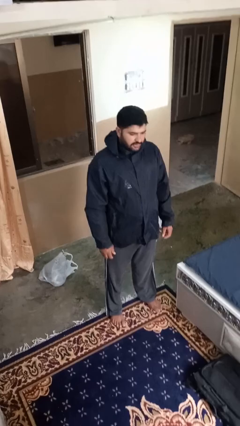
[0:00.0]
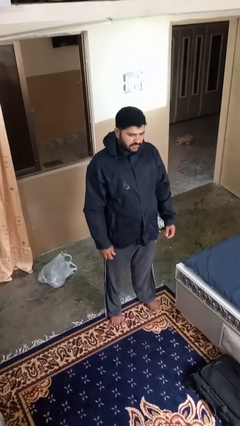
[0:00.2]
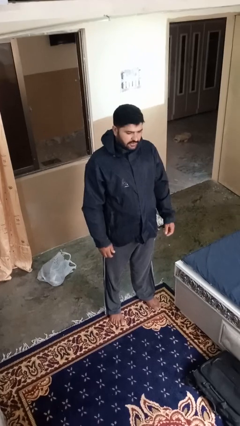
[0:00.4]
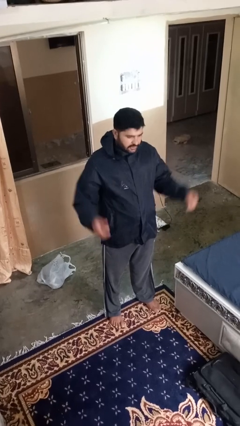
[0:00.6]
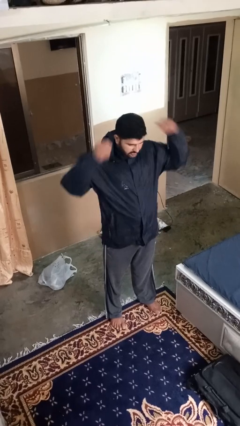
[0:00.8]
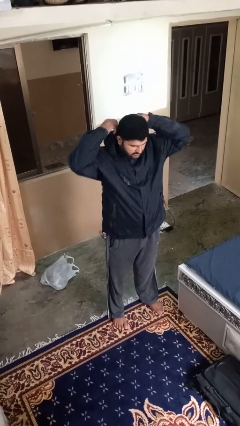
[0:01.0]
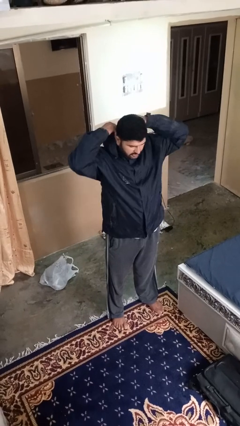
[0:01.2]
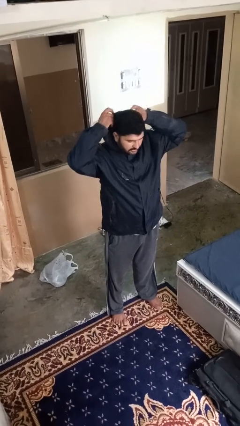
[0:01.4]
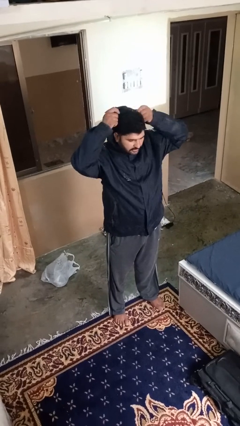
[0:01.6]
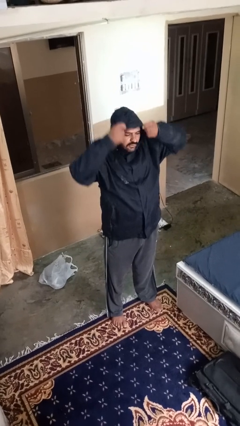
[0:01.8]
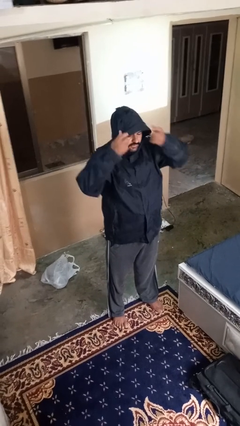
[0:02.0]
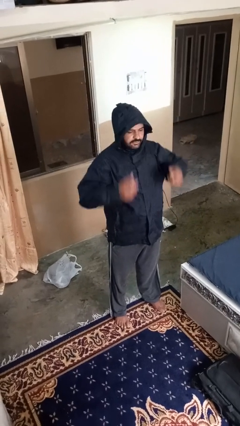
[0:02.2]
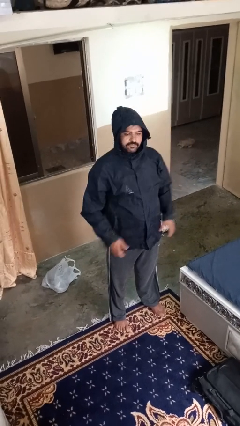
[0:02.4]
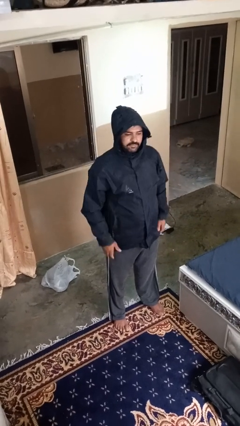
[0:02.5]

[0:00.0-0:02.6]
person puts on hoodie

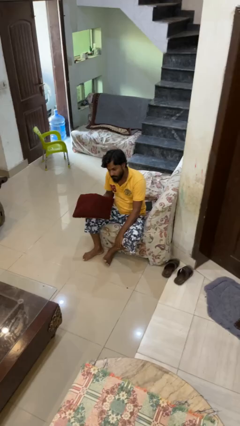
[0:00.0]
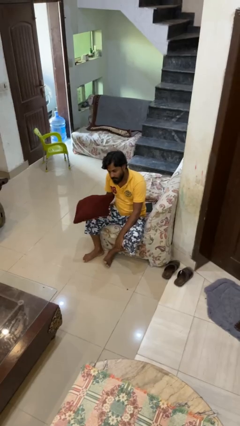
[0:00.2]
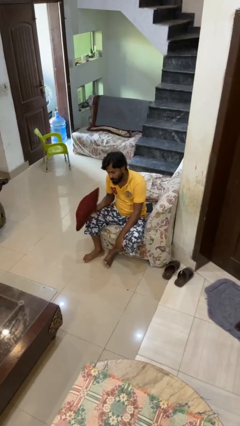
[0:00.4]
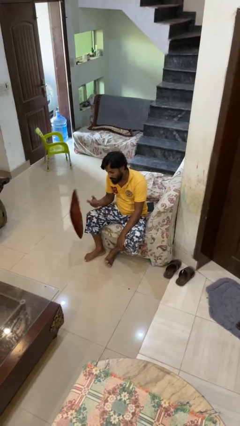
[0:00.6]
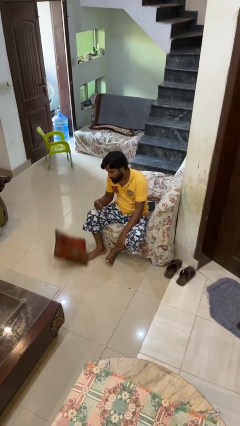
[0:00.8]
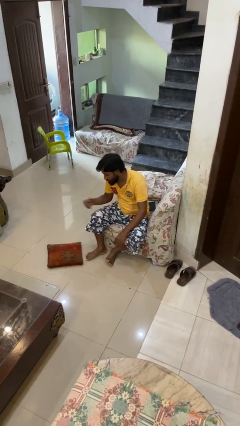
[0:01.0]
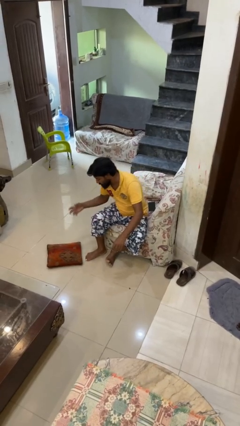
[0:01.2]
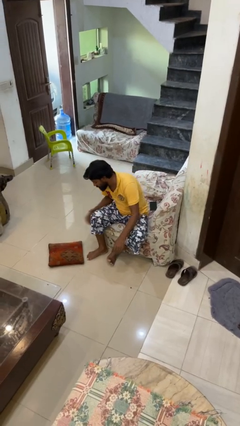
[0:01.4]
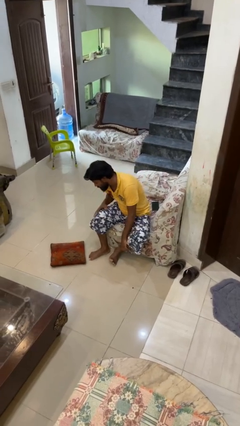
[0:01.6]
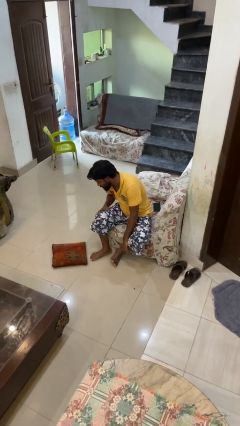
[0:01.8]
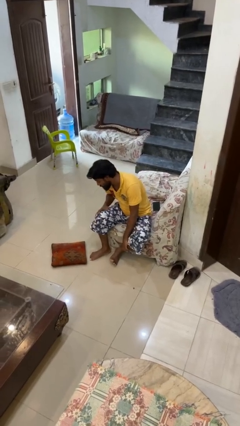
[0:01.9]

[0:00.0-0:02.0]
person drops object

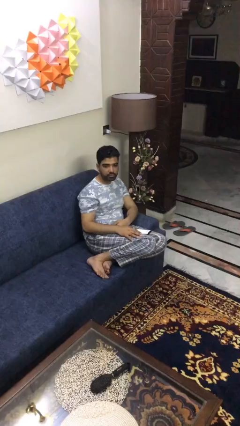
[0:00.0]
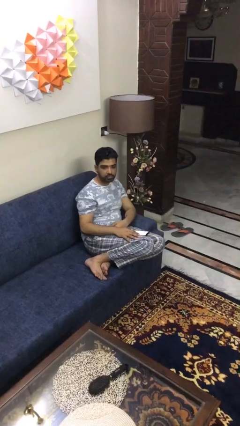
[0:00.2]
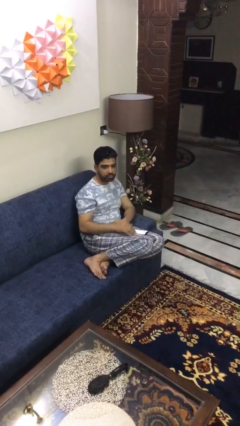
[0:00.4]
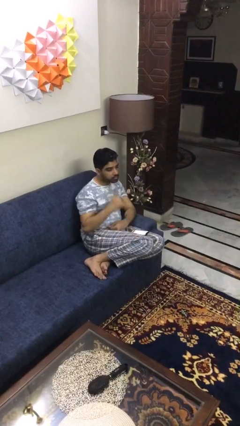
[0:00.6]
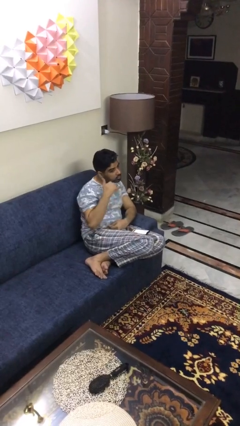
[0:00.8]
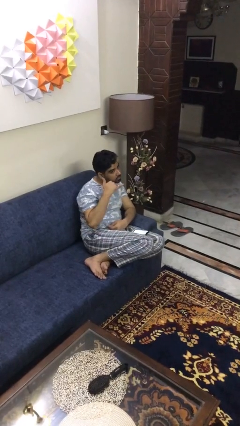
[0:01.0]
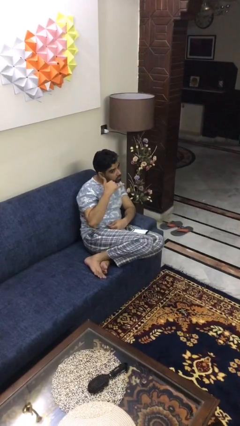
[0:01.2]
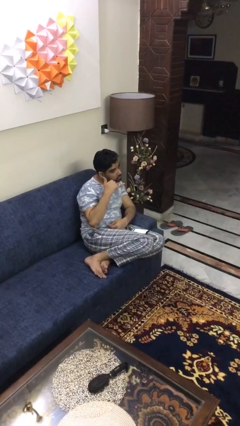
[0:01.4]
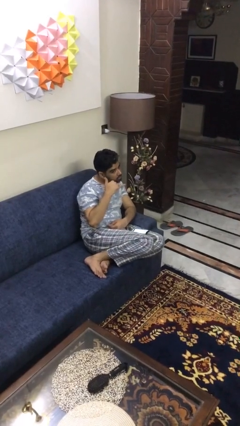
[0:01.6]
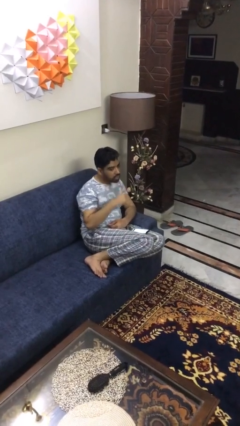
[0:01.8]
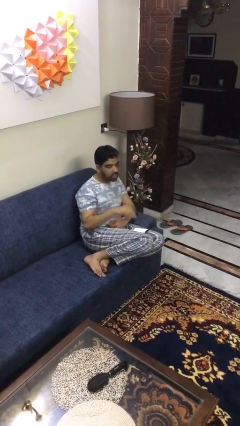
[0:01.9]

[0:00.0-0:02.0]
person gestures call me

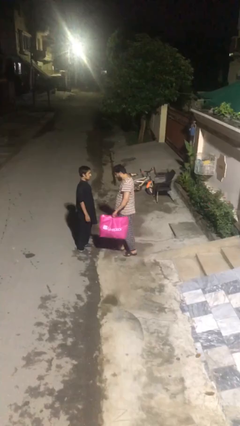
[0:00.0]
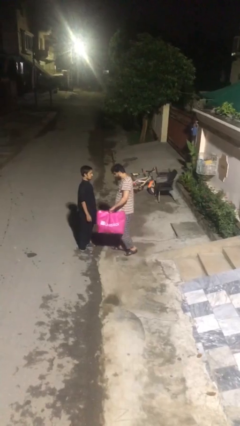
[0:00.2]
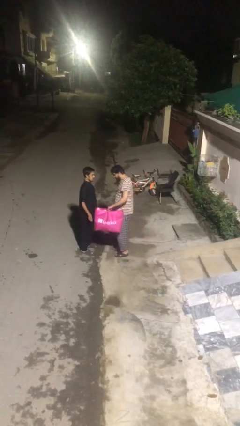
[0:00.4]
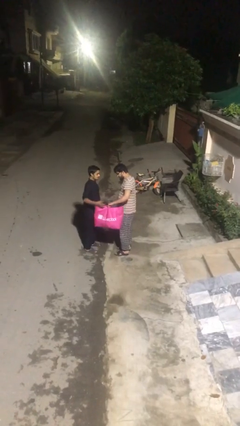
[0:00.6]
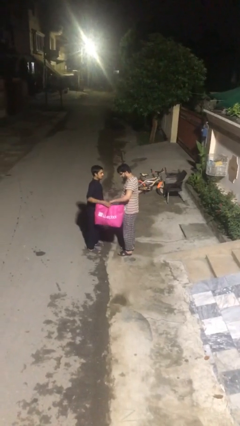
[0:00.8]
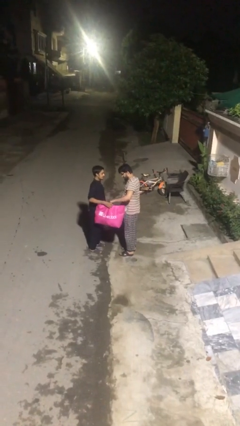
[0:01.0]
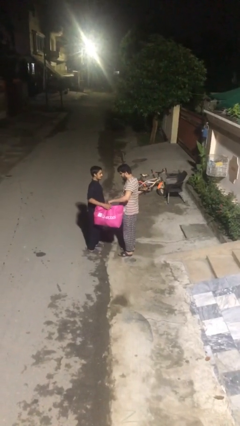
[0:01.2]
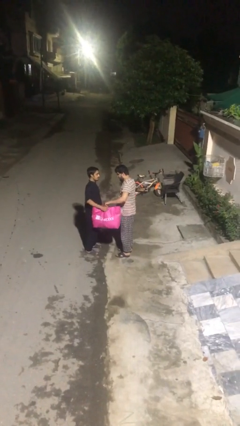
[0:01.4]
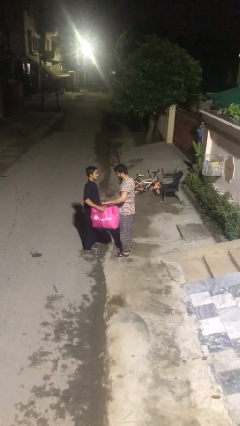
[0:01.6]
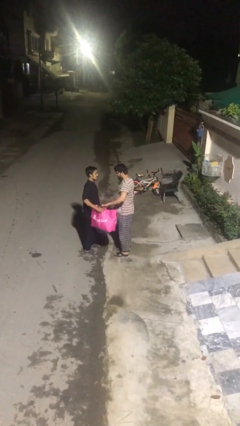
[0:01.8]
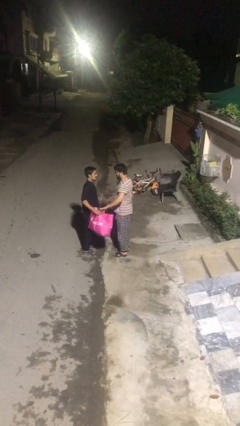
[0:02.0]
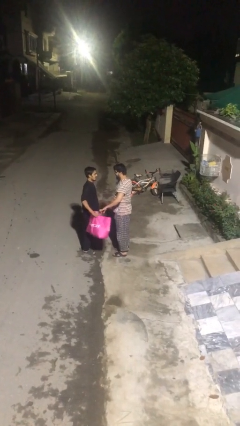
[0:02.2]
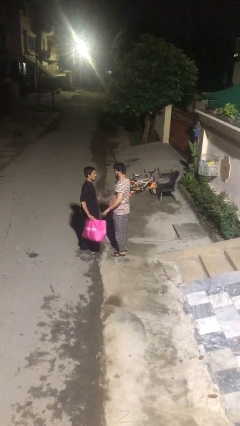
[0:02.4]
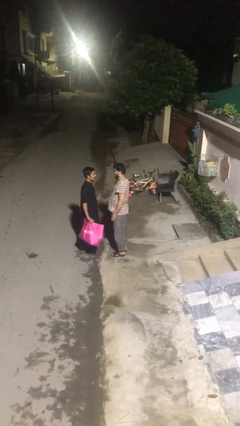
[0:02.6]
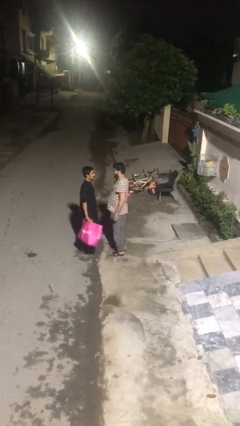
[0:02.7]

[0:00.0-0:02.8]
person transfers object to person

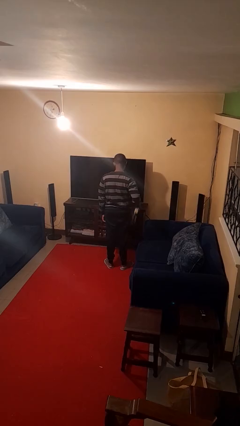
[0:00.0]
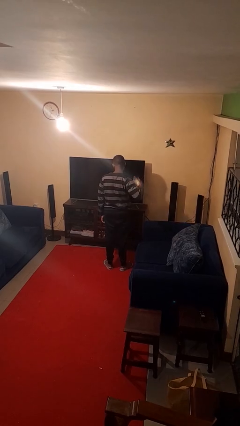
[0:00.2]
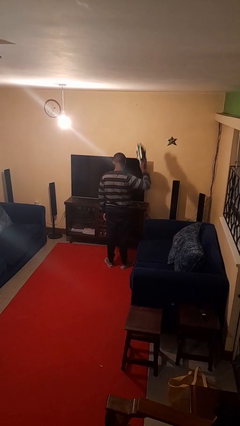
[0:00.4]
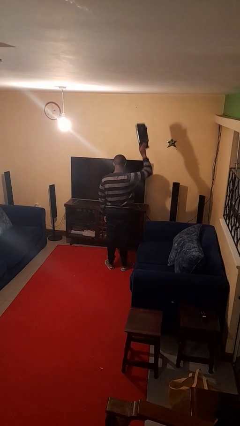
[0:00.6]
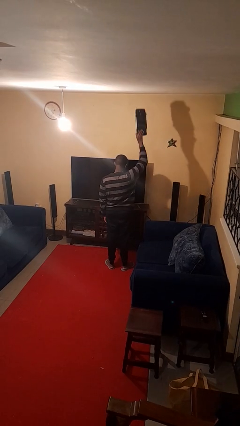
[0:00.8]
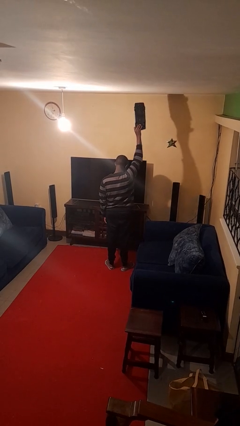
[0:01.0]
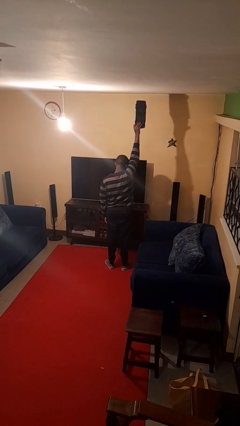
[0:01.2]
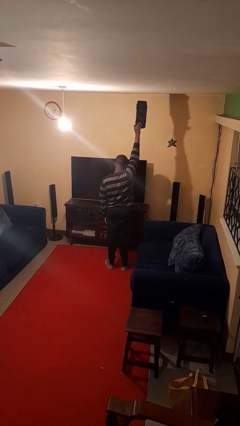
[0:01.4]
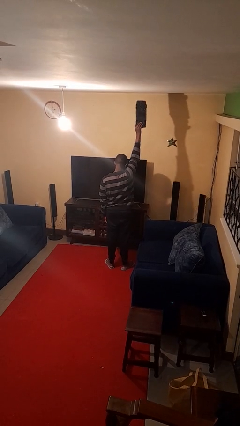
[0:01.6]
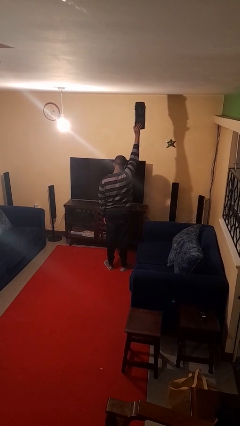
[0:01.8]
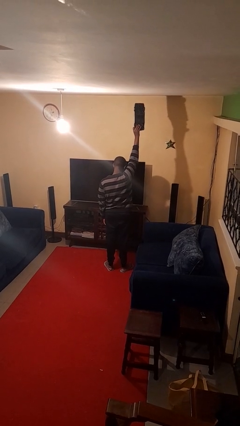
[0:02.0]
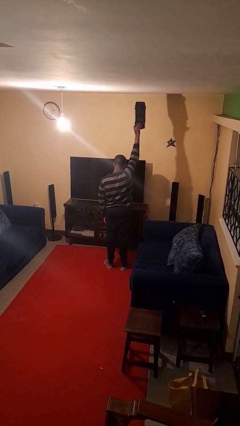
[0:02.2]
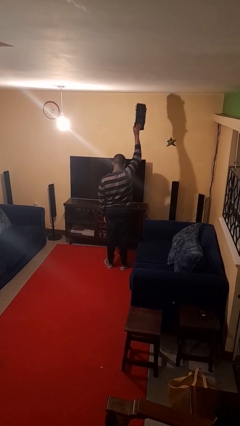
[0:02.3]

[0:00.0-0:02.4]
person holds object above head

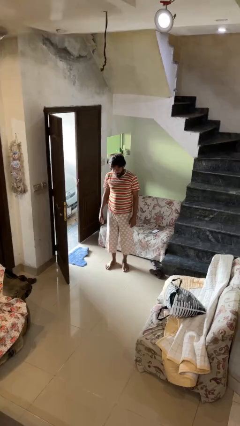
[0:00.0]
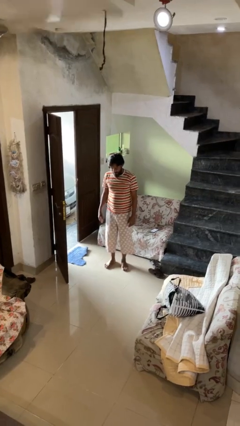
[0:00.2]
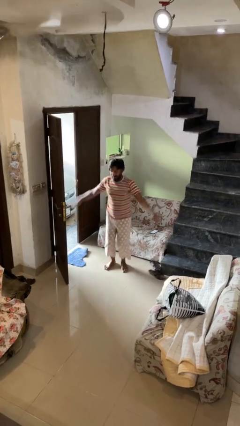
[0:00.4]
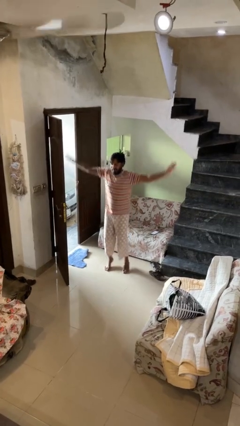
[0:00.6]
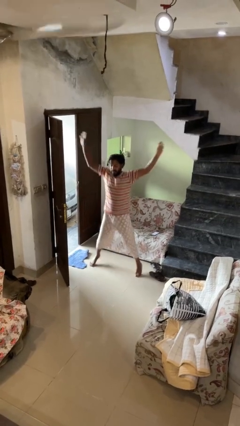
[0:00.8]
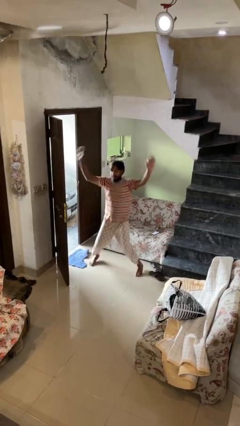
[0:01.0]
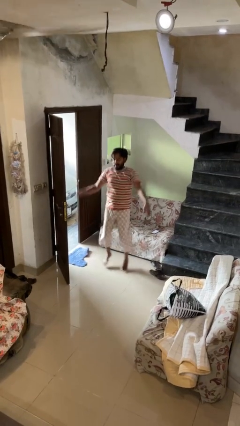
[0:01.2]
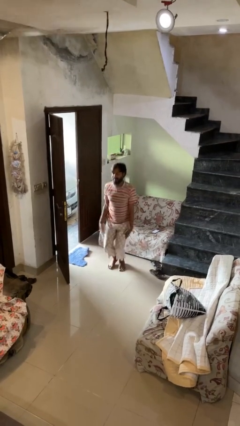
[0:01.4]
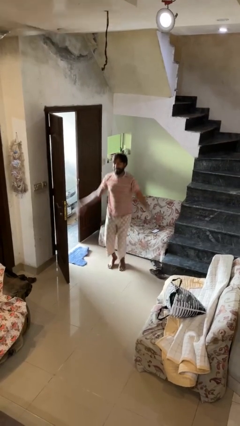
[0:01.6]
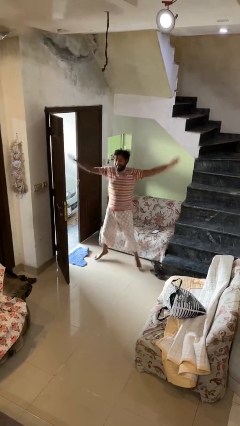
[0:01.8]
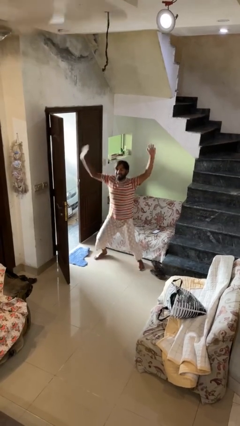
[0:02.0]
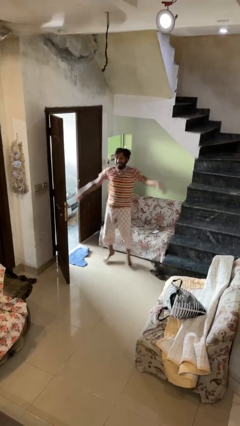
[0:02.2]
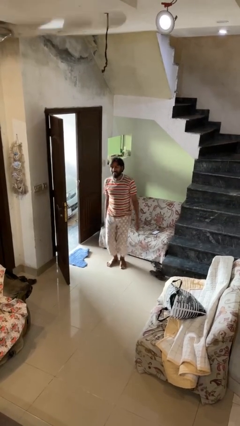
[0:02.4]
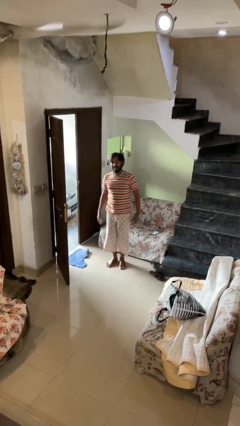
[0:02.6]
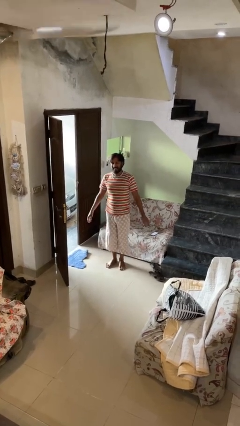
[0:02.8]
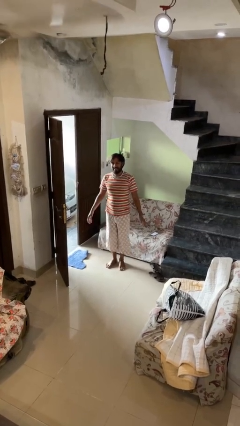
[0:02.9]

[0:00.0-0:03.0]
person exercises with jumping jacks

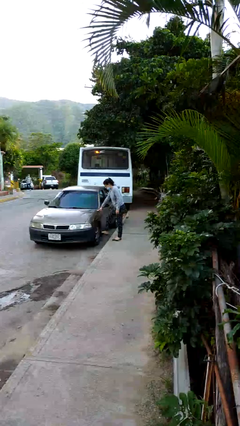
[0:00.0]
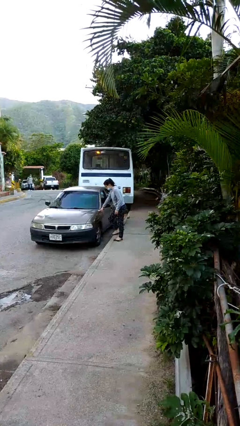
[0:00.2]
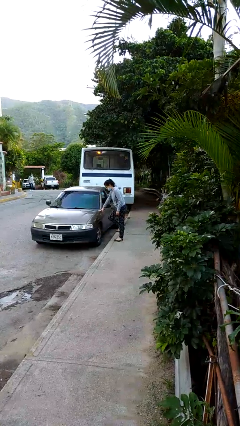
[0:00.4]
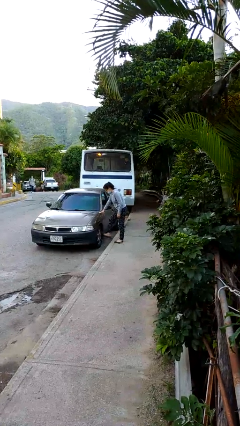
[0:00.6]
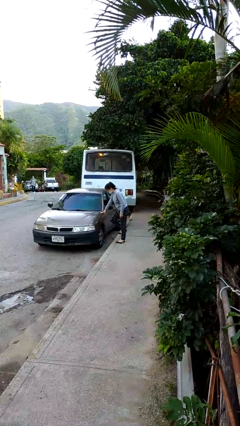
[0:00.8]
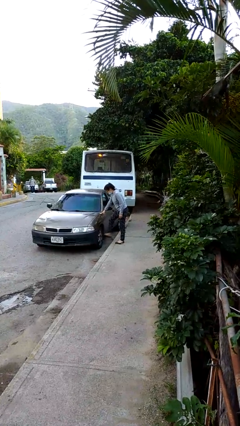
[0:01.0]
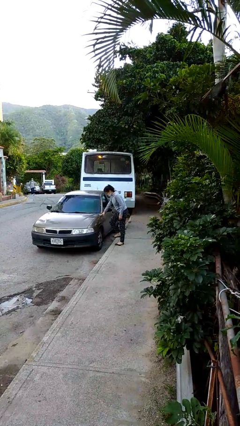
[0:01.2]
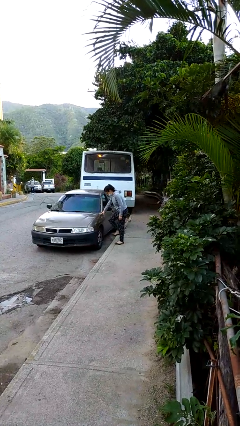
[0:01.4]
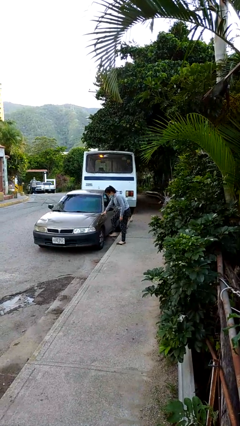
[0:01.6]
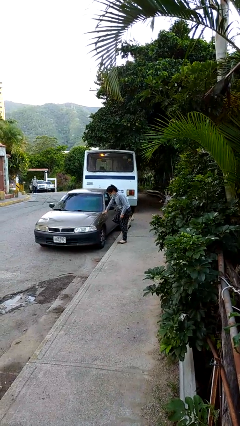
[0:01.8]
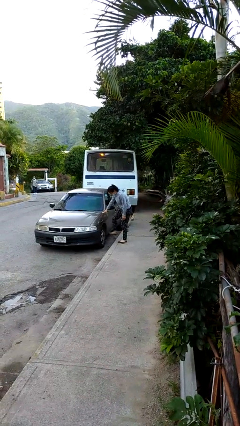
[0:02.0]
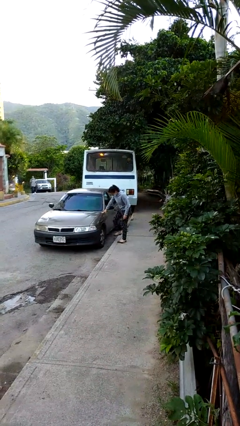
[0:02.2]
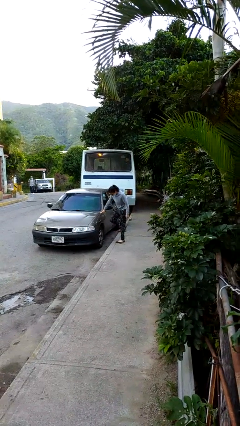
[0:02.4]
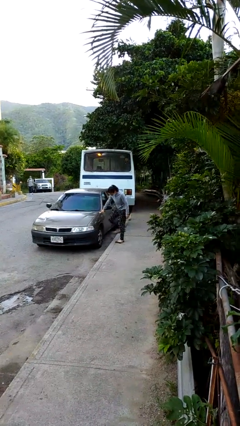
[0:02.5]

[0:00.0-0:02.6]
person kicks car tires
